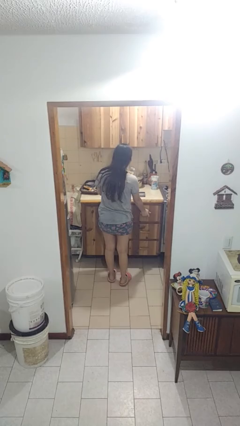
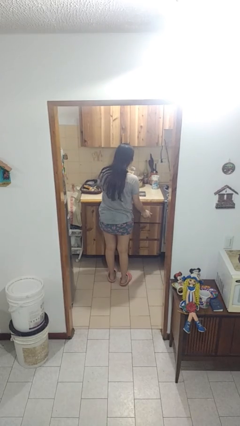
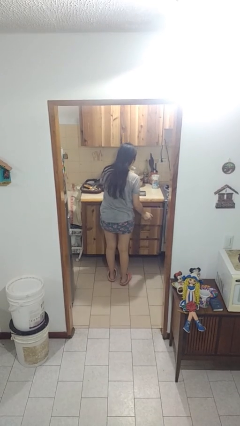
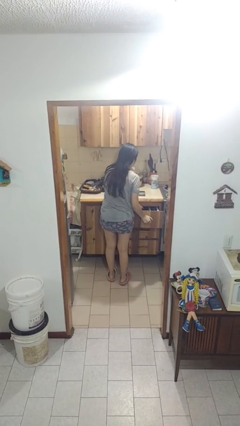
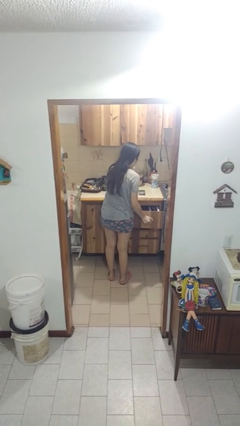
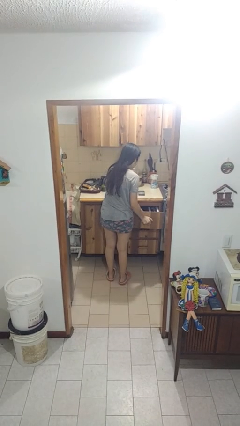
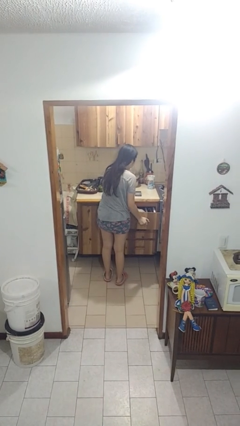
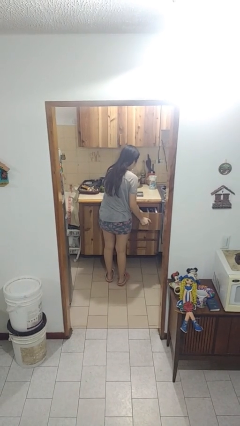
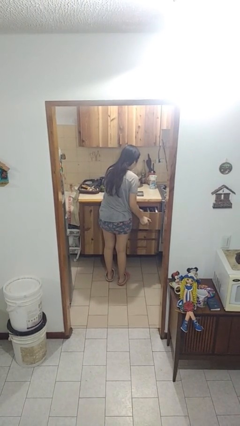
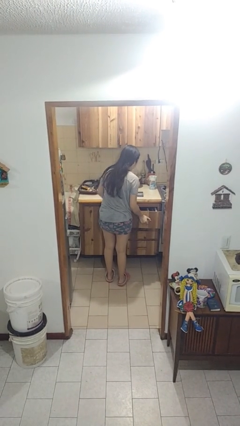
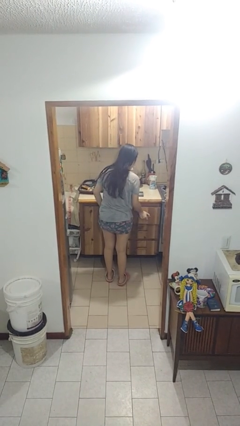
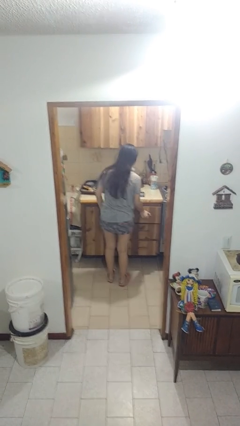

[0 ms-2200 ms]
person searches in kitchen drawer

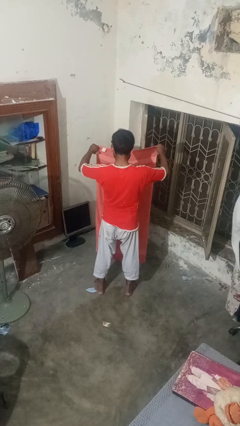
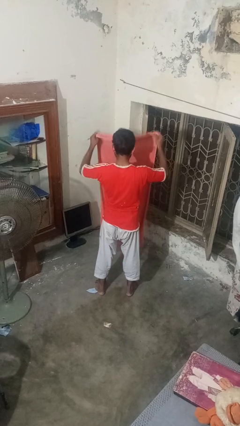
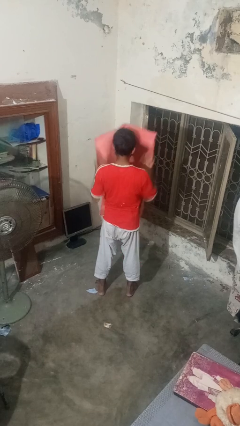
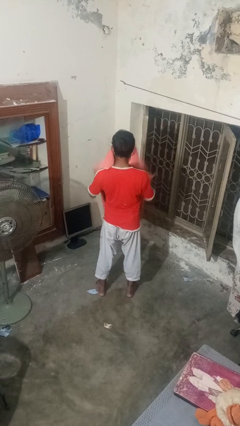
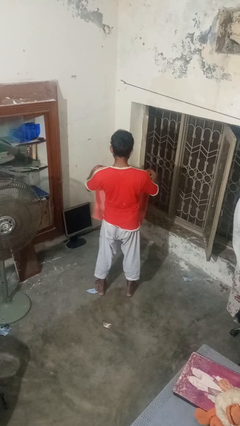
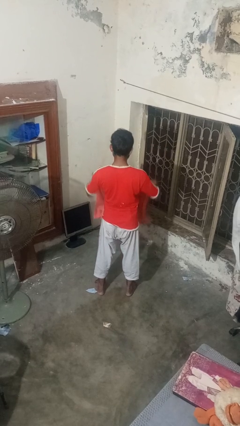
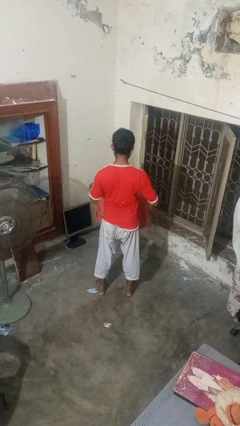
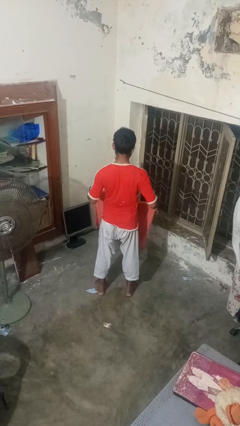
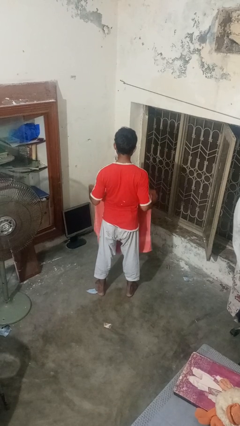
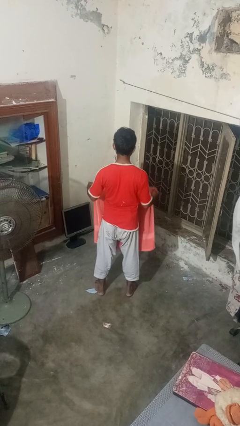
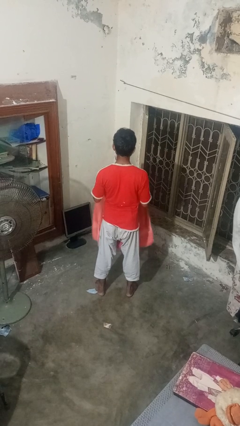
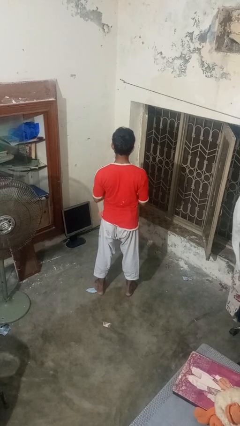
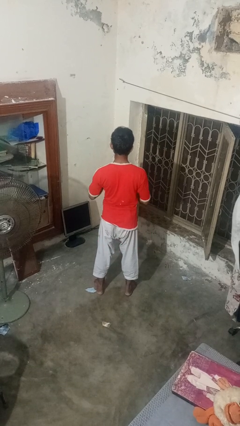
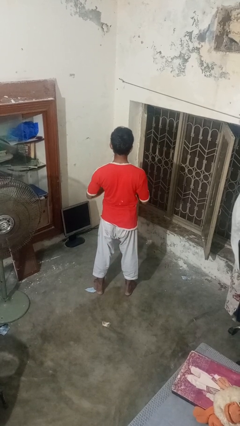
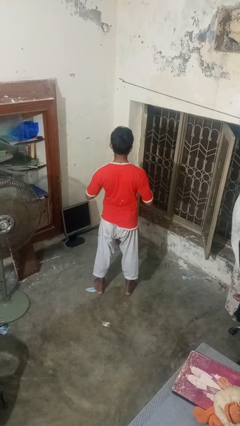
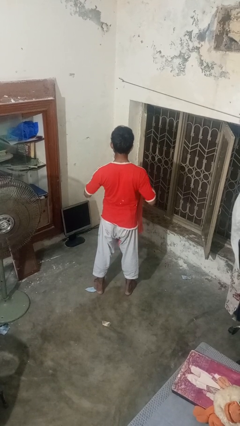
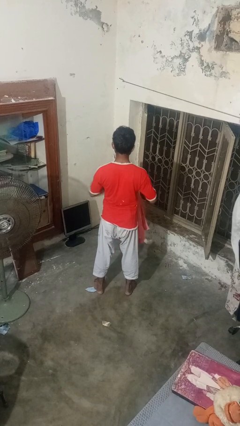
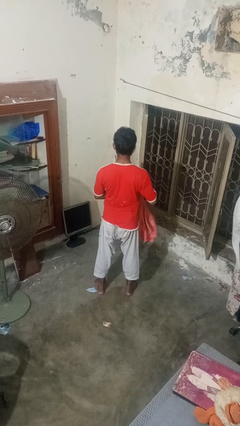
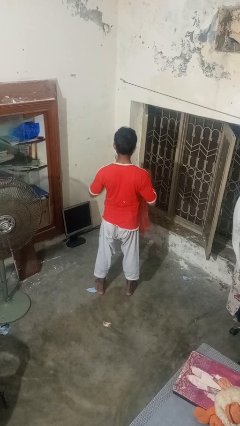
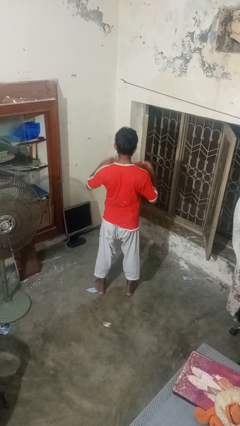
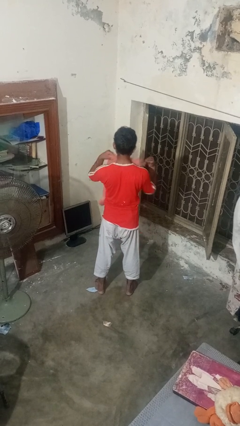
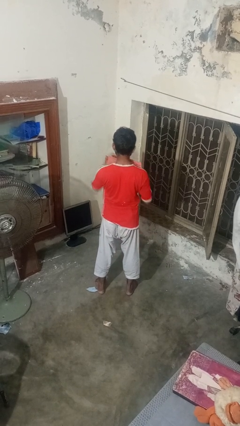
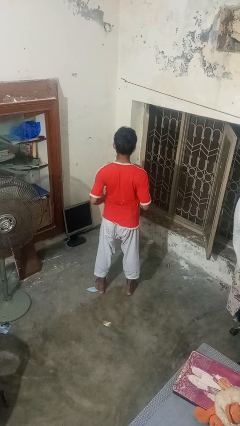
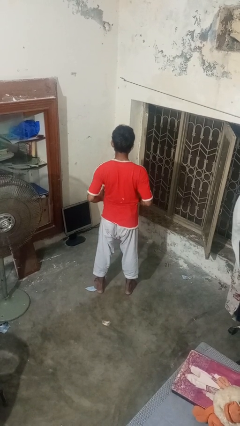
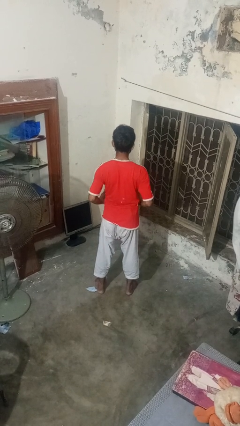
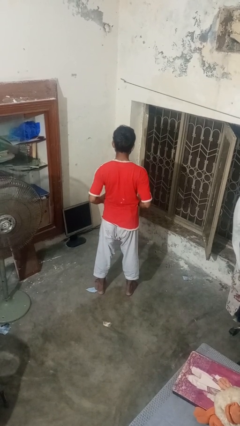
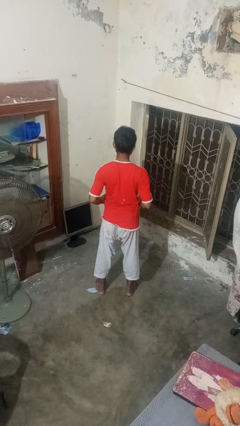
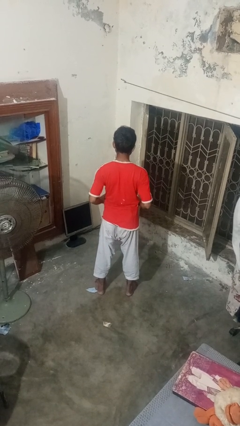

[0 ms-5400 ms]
person folds towel

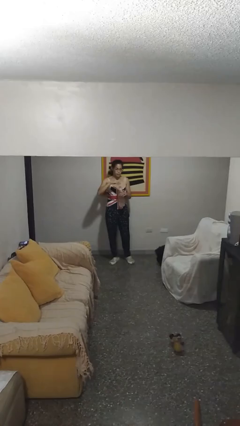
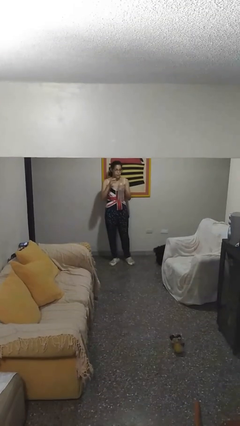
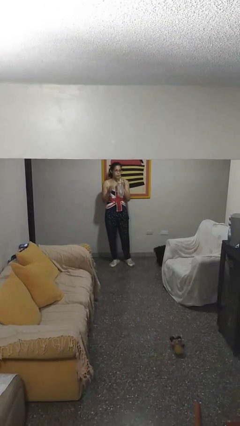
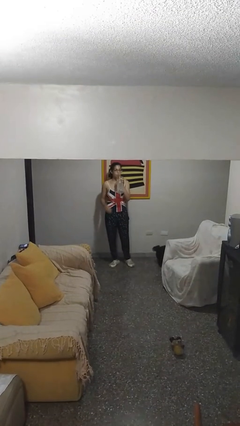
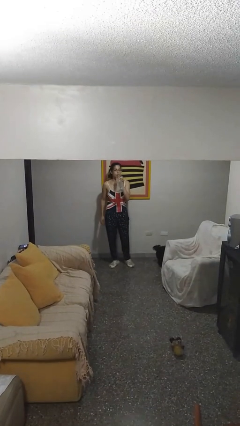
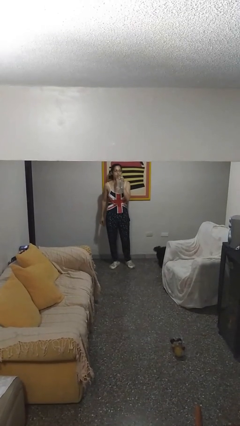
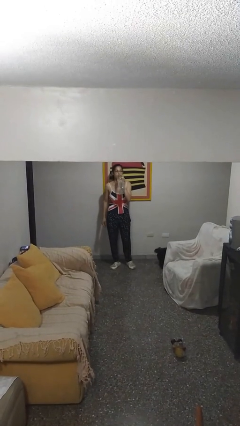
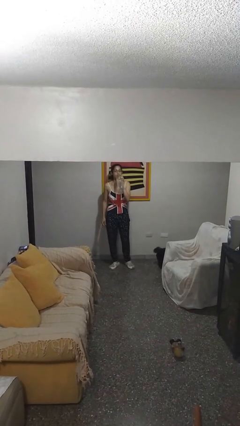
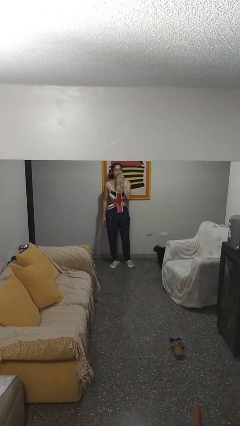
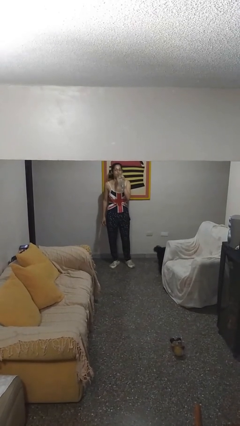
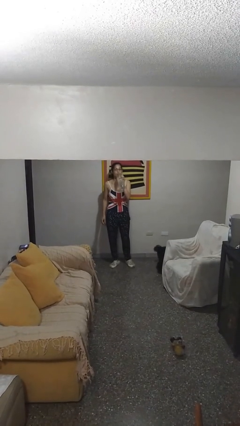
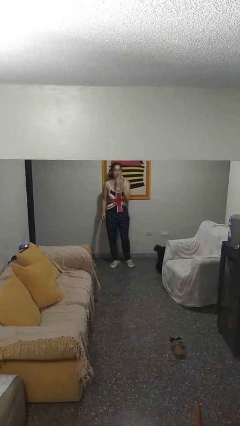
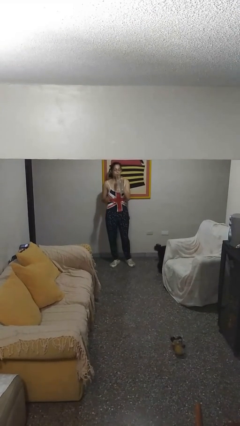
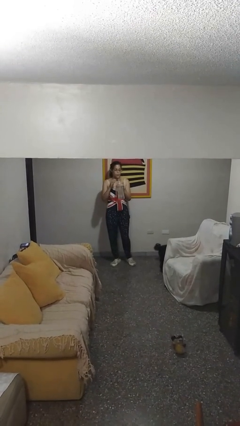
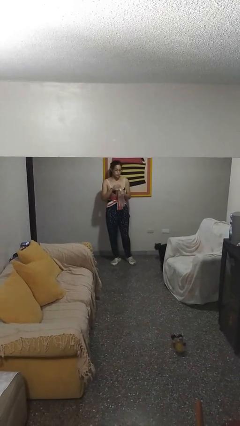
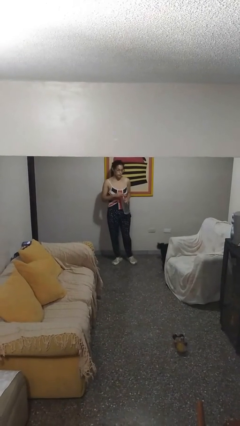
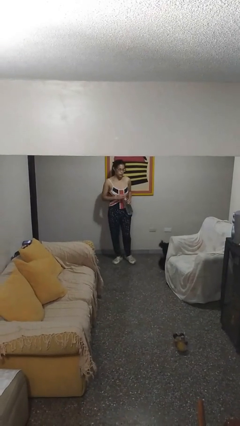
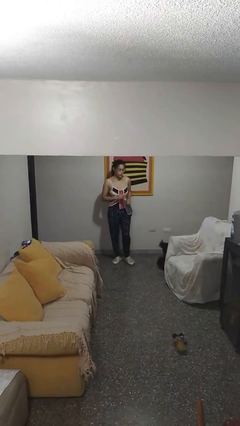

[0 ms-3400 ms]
person drinks from bottle

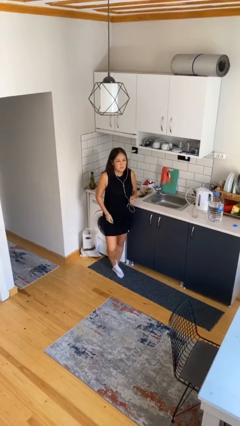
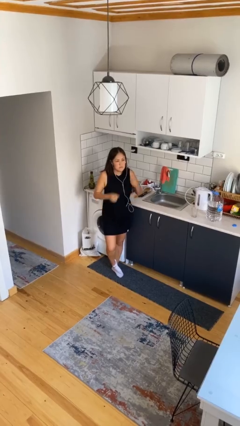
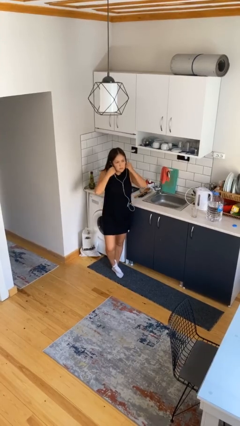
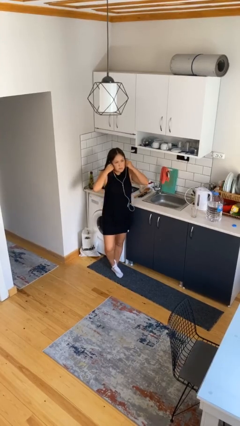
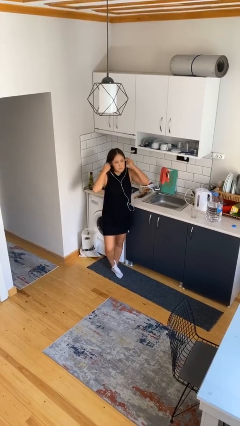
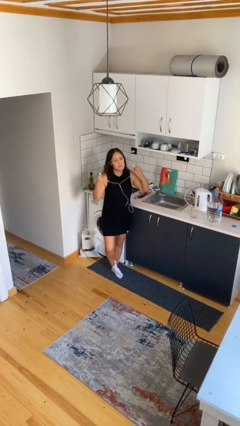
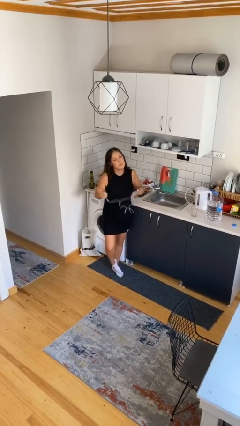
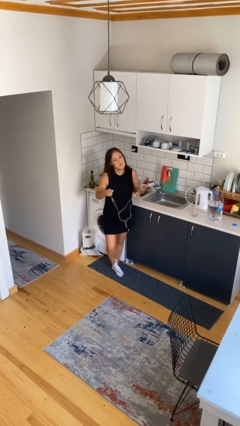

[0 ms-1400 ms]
person takes off headphones

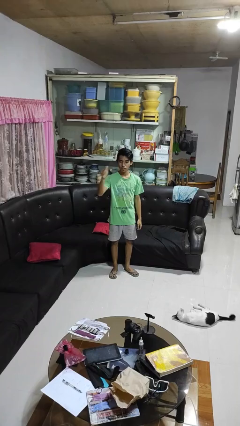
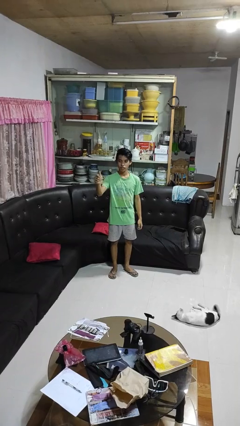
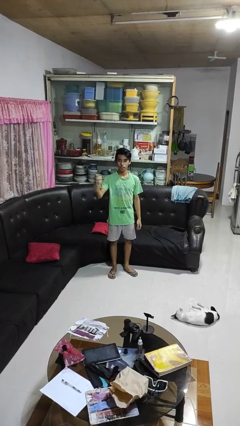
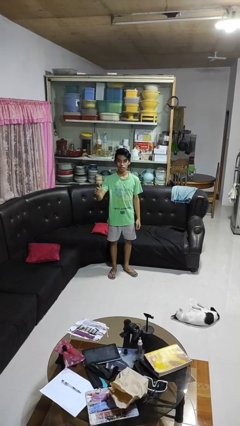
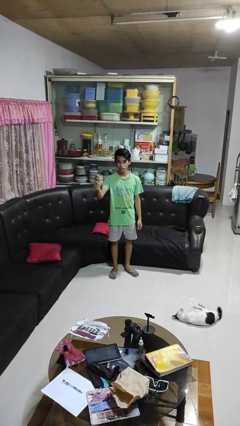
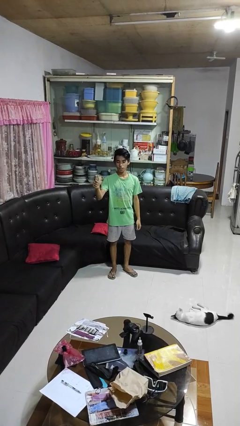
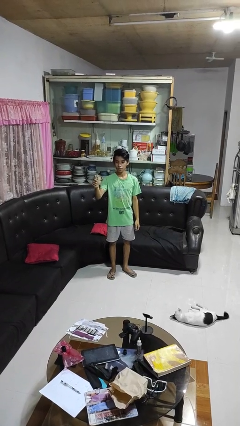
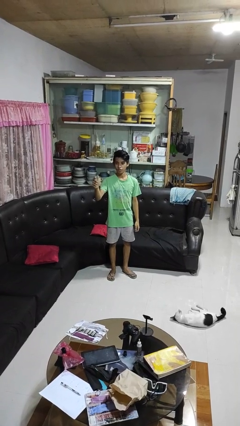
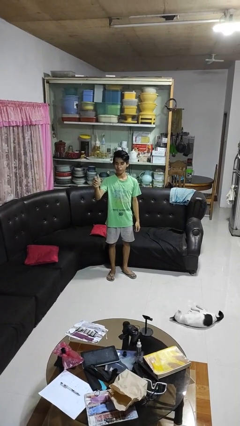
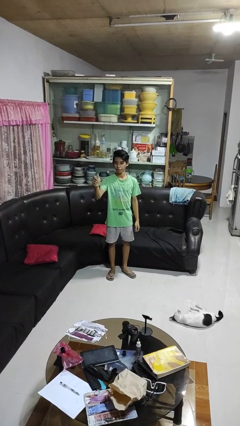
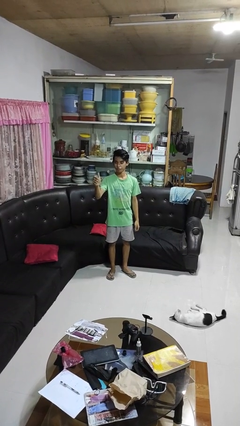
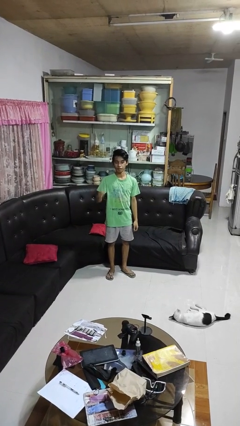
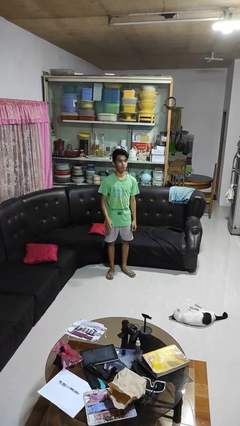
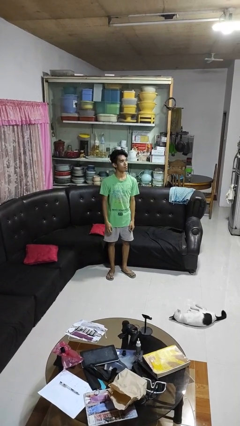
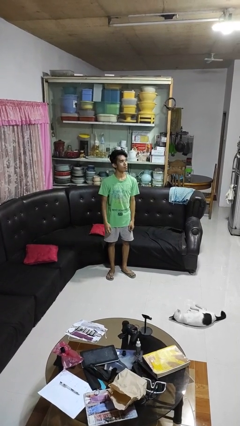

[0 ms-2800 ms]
person gestures thumbs up

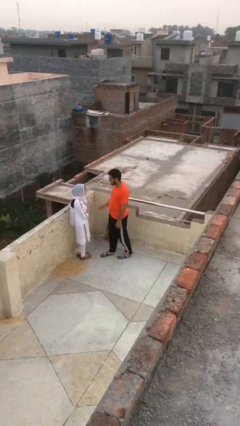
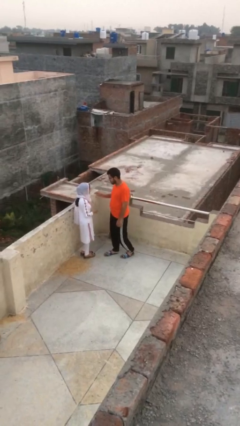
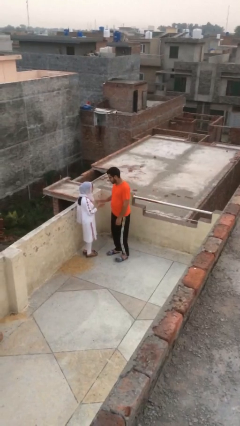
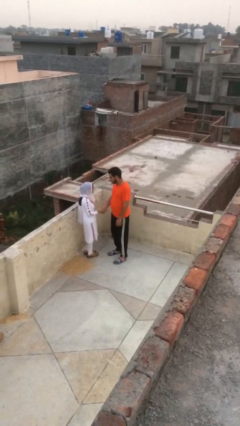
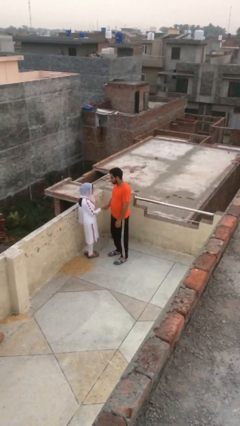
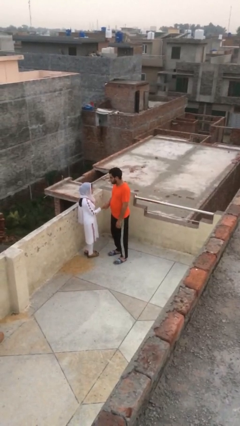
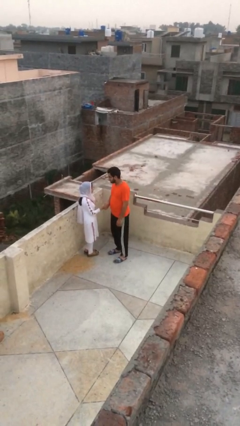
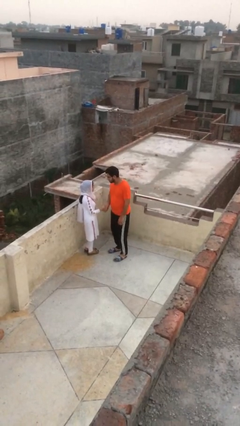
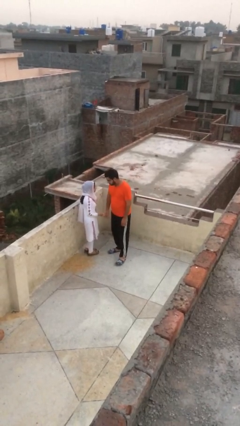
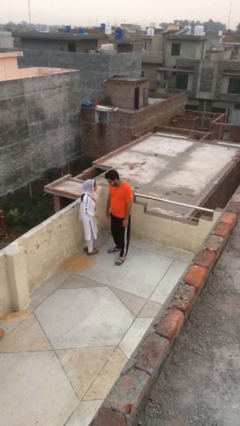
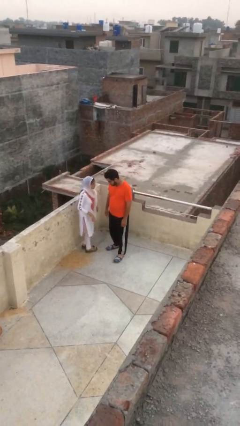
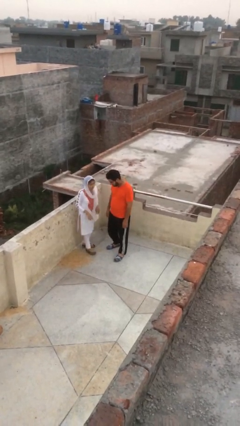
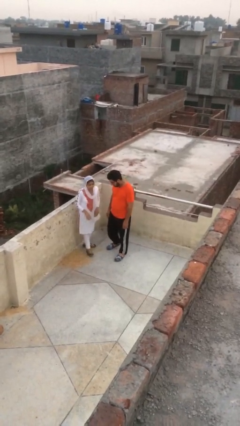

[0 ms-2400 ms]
person shakes hand

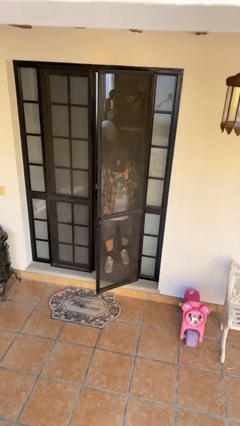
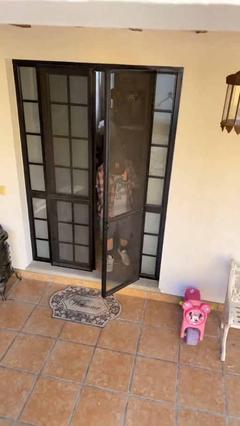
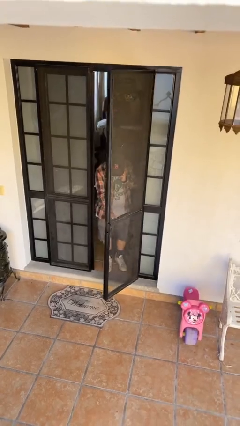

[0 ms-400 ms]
person opens facility door
